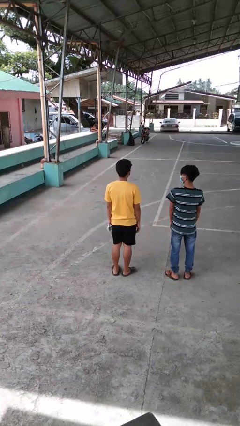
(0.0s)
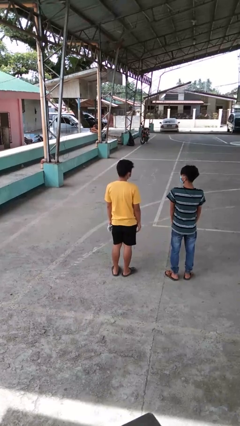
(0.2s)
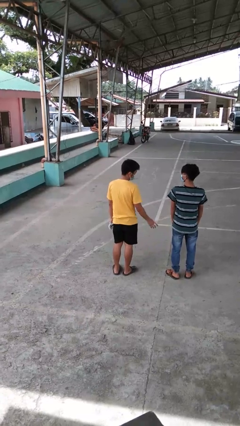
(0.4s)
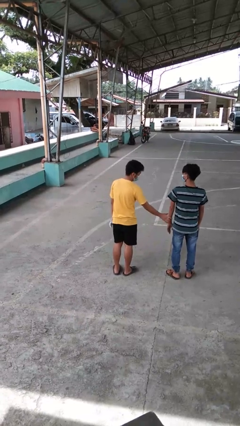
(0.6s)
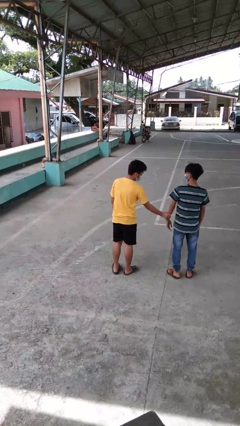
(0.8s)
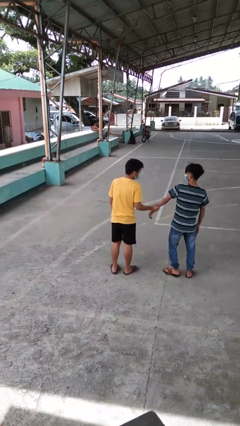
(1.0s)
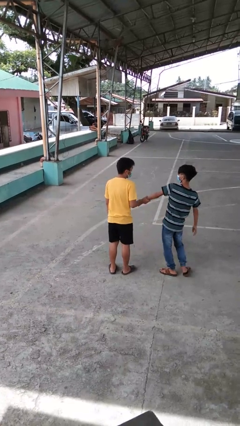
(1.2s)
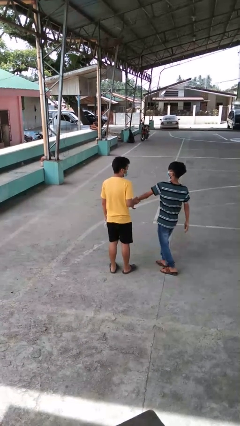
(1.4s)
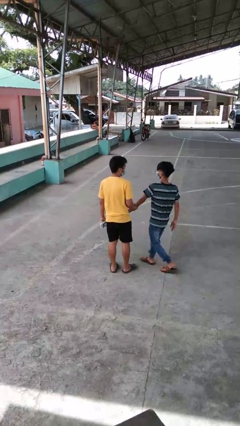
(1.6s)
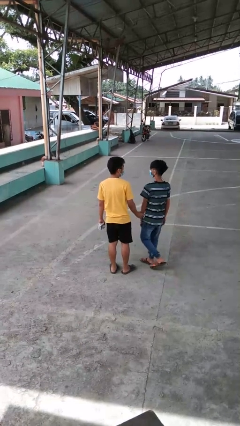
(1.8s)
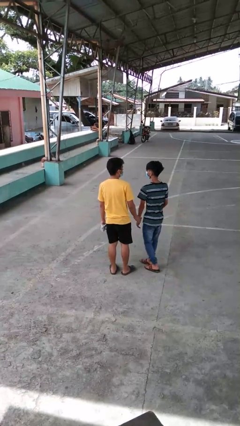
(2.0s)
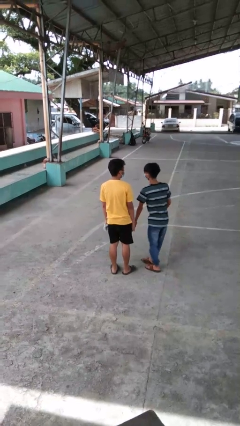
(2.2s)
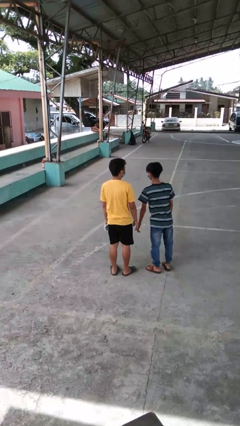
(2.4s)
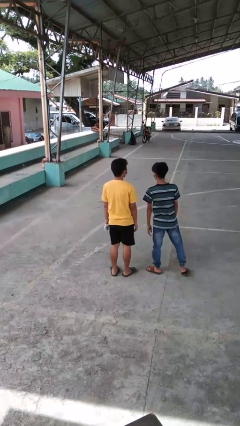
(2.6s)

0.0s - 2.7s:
person grabs person by forearm

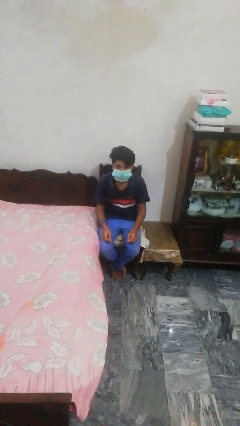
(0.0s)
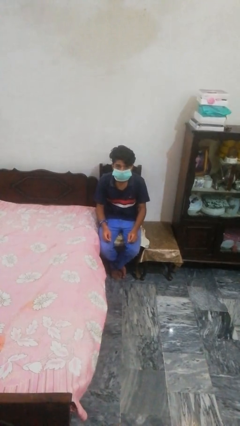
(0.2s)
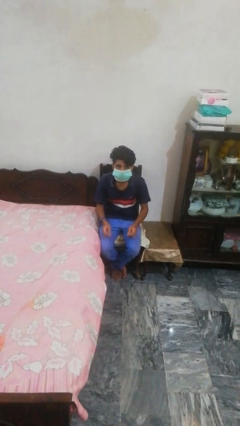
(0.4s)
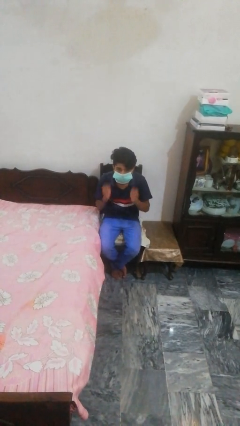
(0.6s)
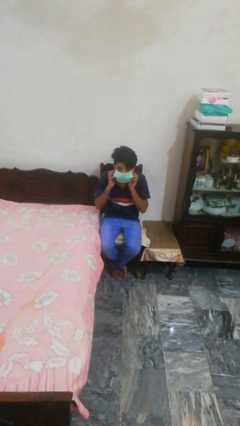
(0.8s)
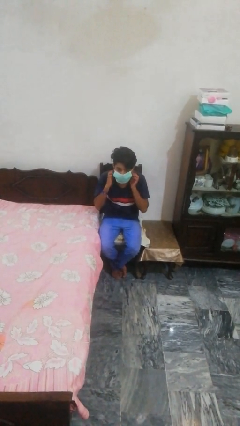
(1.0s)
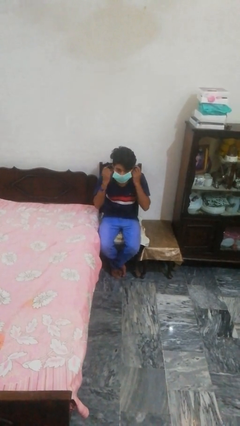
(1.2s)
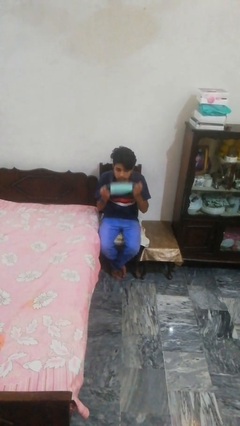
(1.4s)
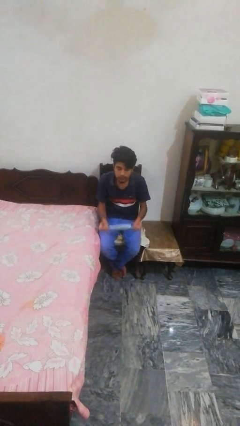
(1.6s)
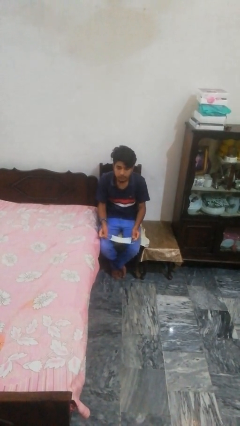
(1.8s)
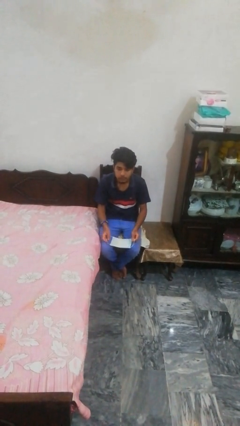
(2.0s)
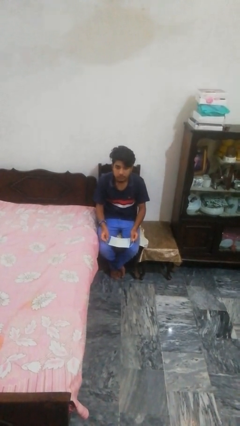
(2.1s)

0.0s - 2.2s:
person takes off facemask

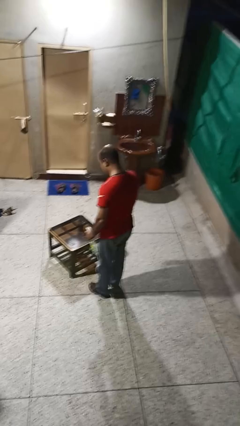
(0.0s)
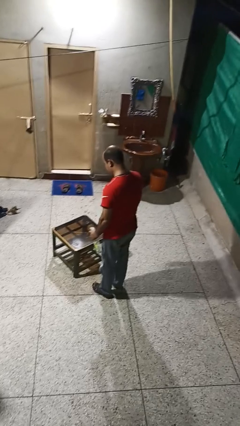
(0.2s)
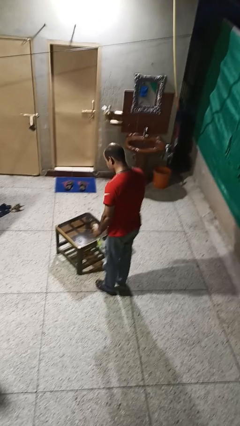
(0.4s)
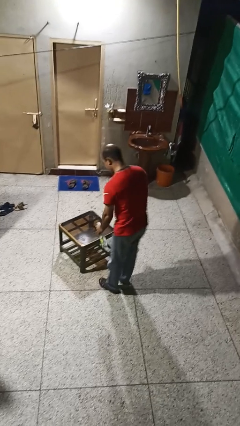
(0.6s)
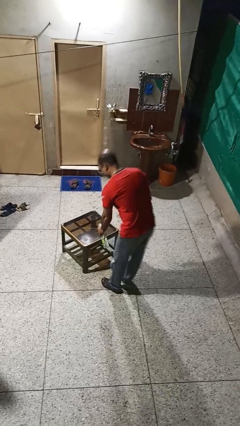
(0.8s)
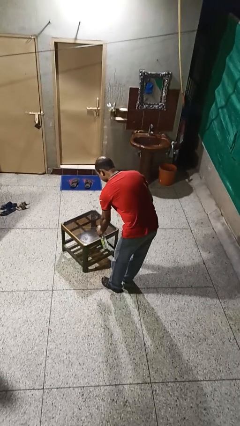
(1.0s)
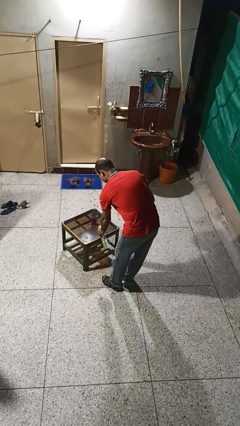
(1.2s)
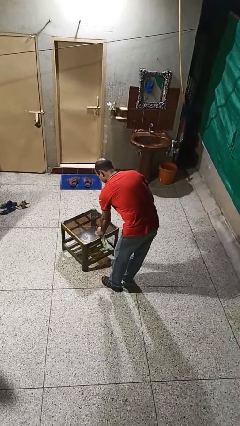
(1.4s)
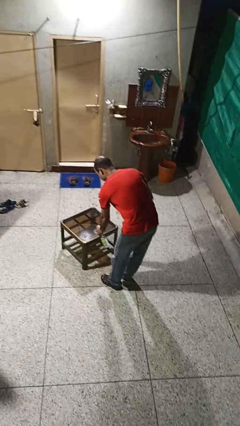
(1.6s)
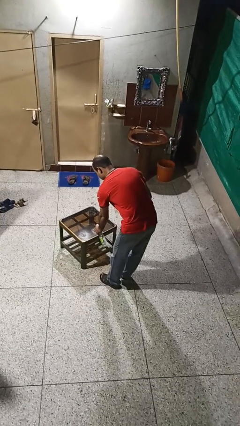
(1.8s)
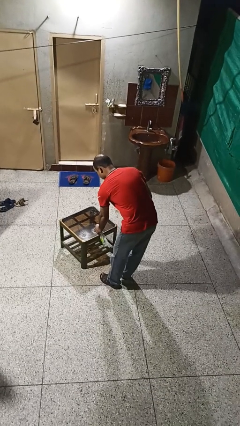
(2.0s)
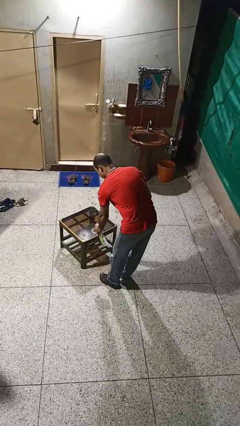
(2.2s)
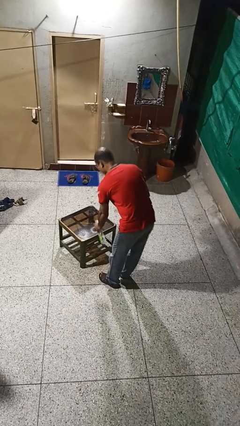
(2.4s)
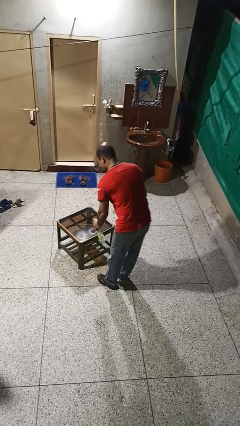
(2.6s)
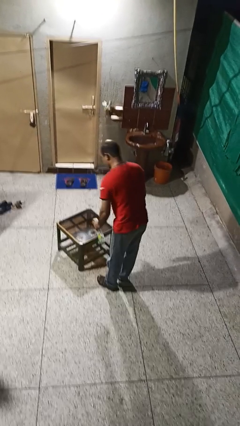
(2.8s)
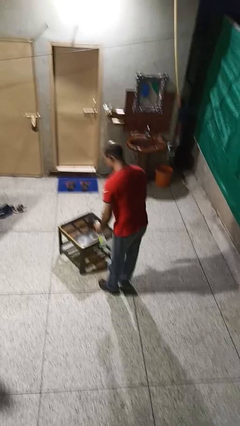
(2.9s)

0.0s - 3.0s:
person sprays from bottle

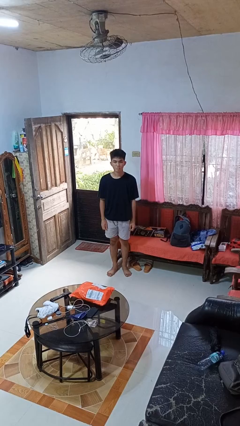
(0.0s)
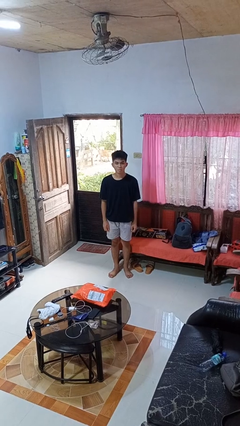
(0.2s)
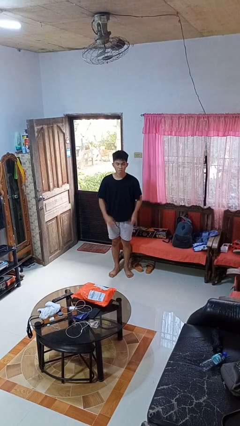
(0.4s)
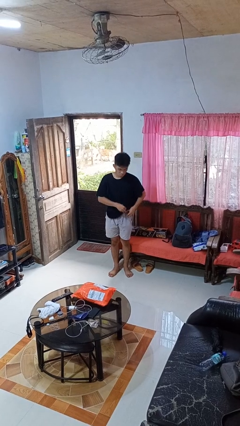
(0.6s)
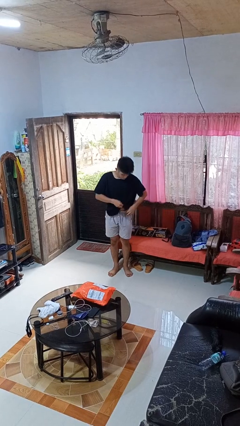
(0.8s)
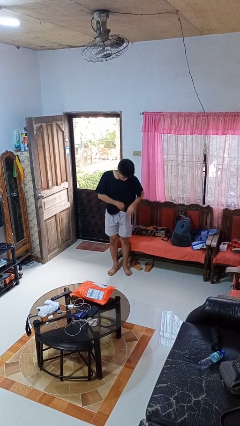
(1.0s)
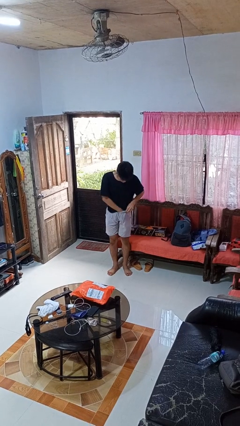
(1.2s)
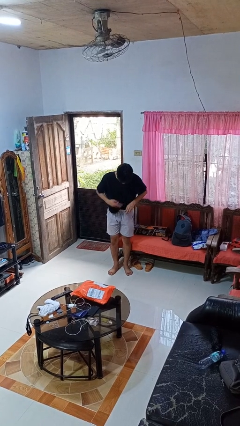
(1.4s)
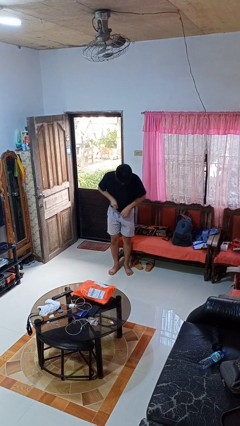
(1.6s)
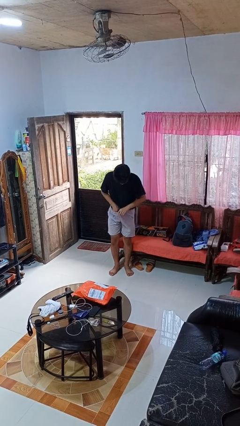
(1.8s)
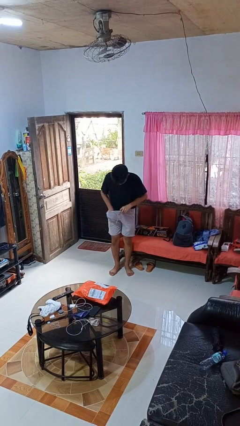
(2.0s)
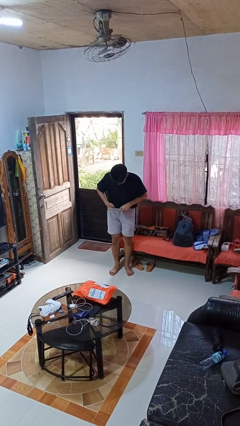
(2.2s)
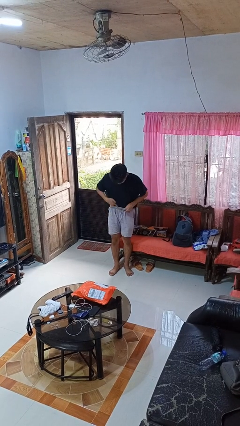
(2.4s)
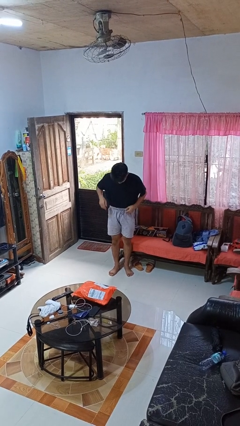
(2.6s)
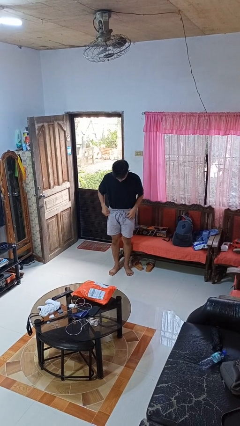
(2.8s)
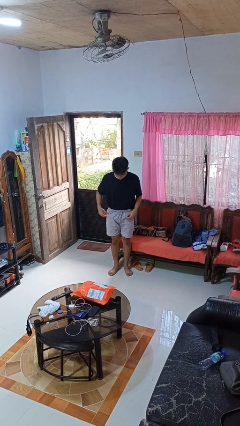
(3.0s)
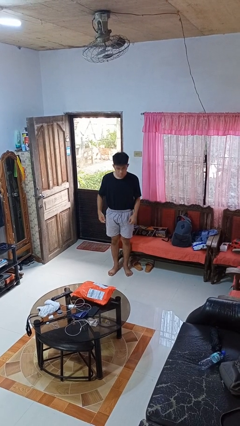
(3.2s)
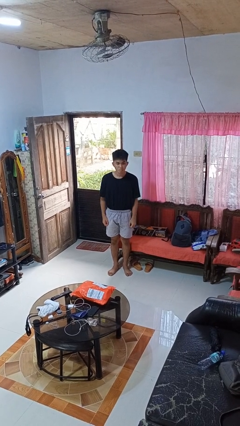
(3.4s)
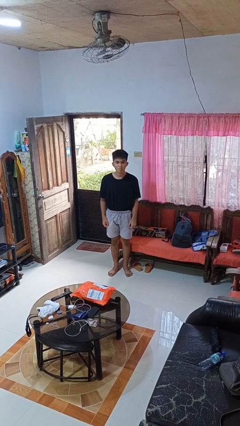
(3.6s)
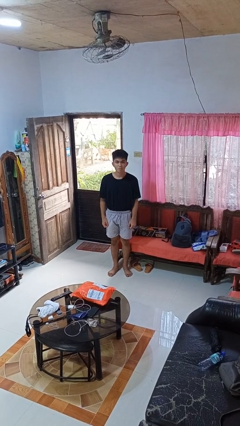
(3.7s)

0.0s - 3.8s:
person tucks in shirt

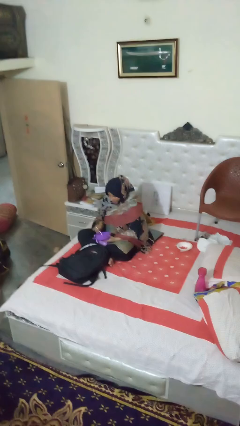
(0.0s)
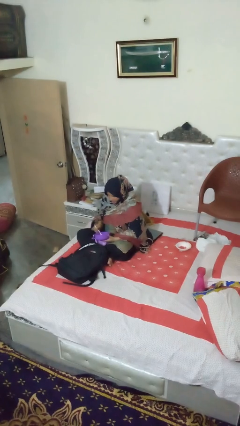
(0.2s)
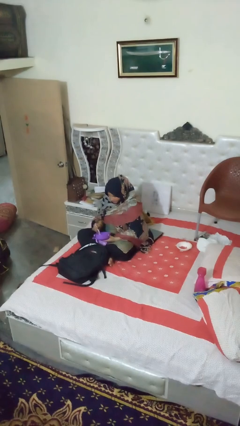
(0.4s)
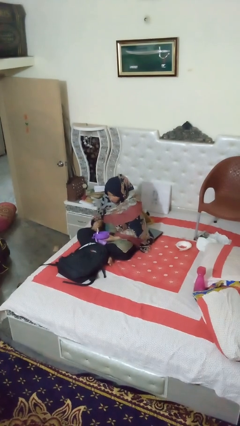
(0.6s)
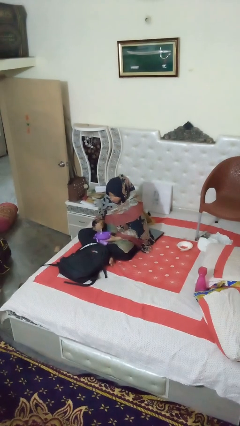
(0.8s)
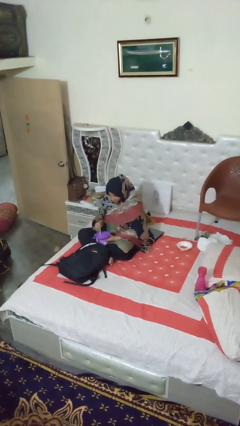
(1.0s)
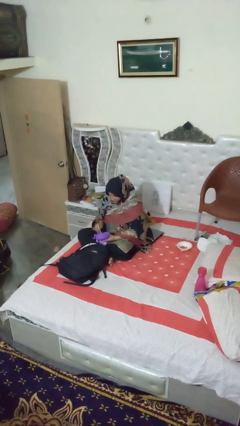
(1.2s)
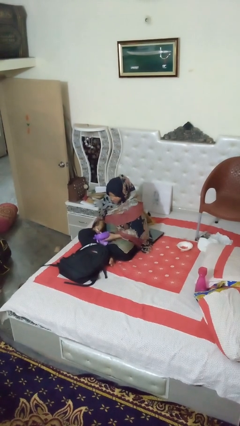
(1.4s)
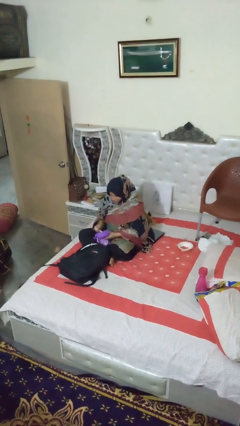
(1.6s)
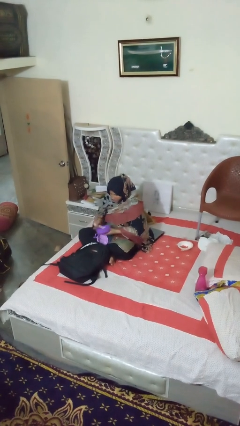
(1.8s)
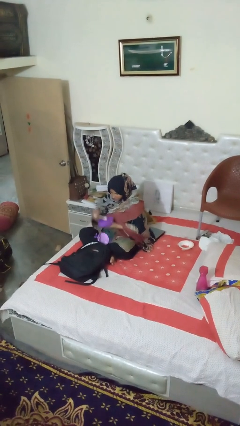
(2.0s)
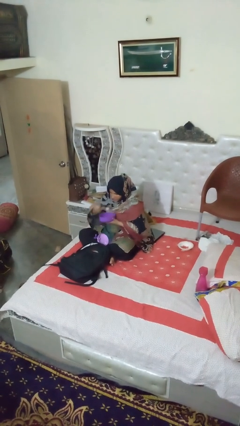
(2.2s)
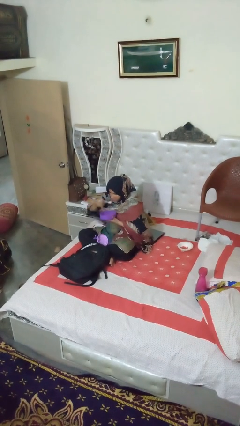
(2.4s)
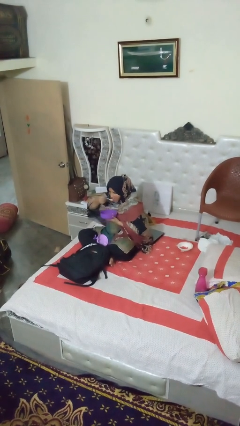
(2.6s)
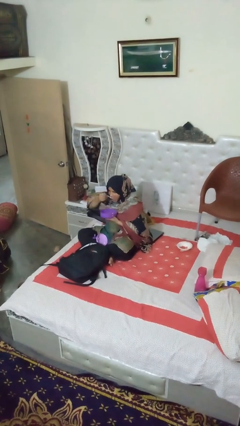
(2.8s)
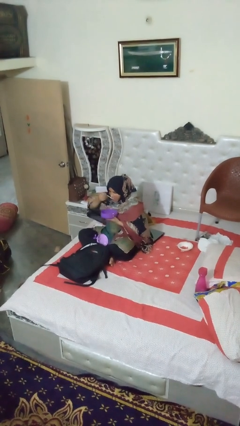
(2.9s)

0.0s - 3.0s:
person eats snack from bag

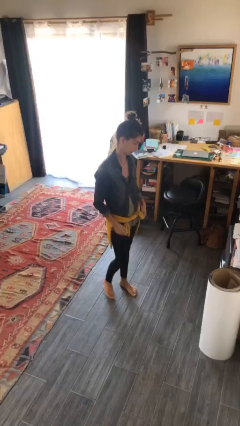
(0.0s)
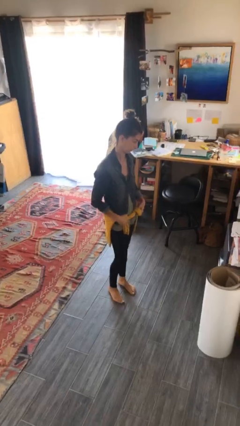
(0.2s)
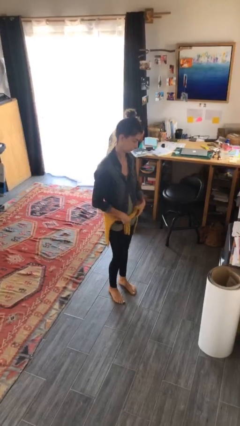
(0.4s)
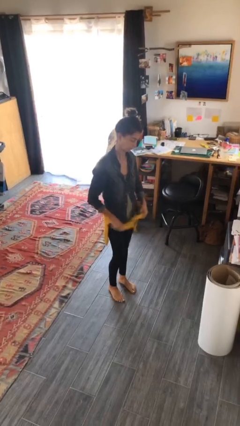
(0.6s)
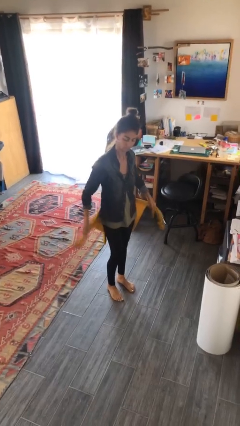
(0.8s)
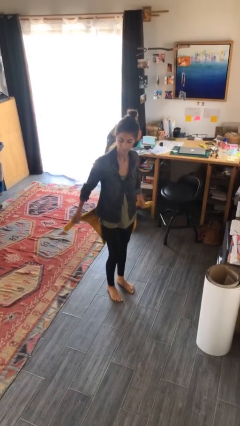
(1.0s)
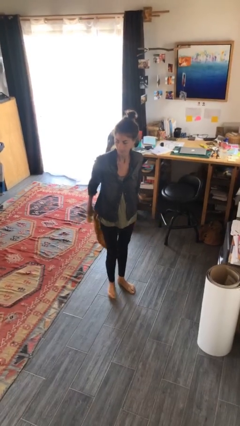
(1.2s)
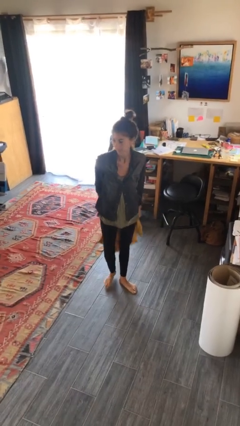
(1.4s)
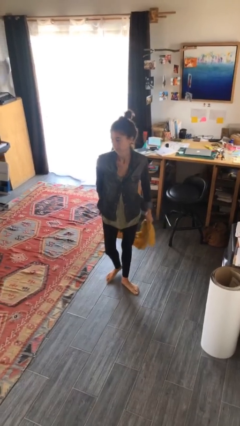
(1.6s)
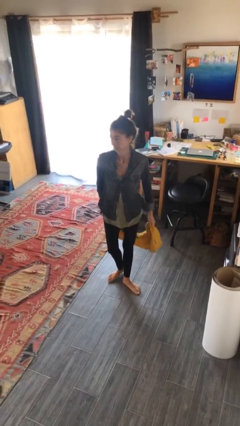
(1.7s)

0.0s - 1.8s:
person unties jacket around waist

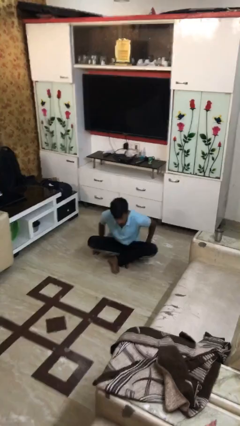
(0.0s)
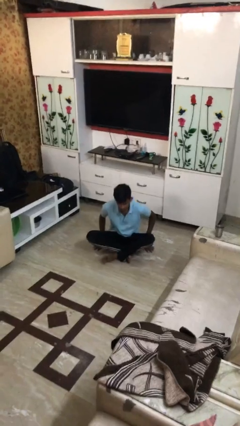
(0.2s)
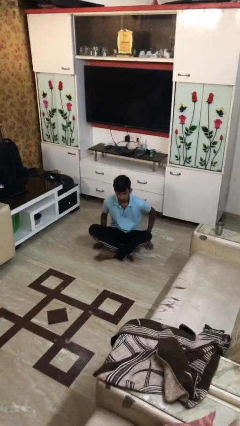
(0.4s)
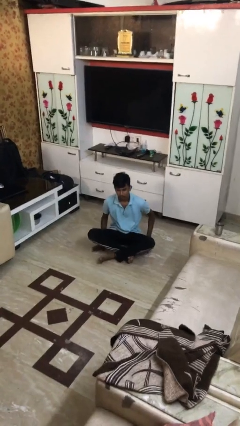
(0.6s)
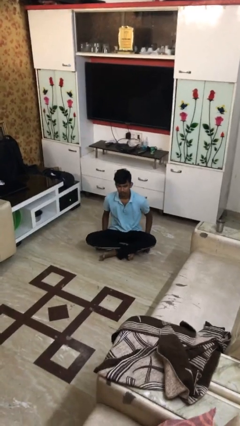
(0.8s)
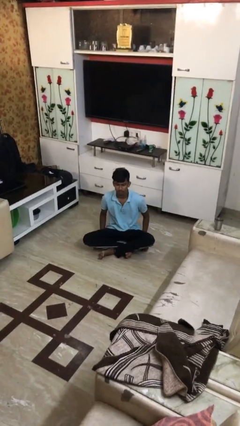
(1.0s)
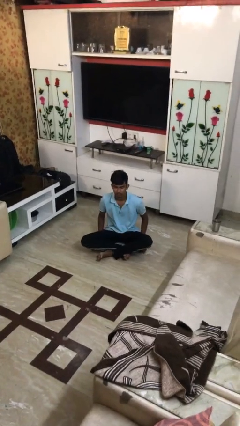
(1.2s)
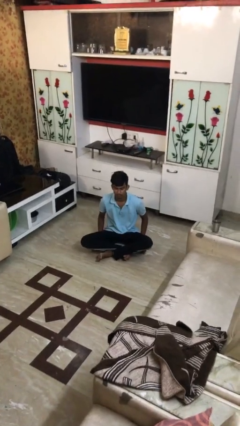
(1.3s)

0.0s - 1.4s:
person sits crisscross
